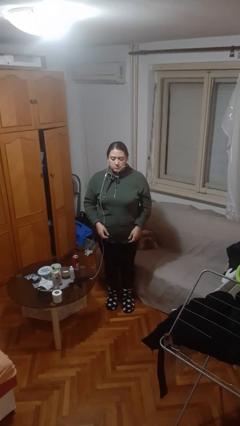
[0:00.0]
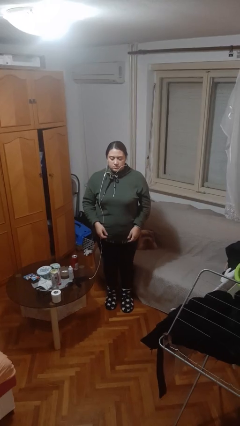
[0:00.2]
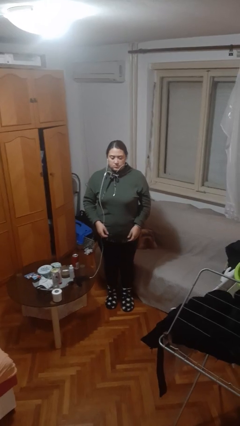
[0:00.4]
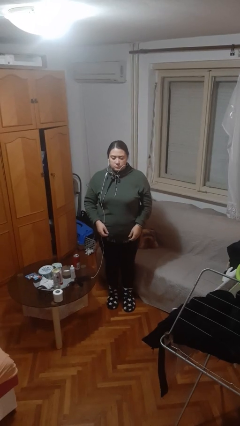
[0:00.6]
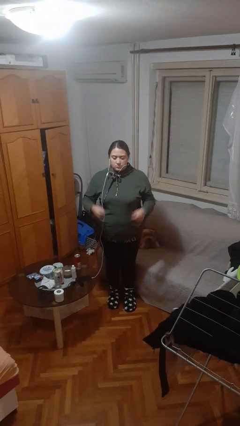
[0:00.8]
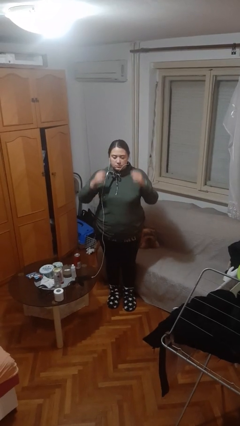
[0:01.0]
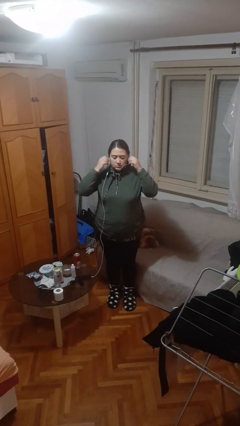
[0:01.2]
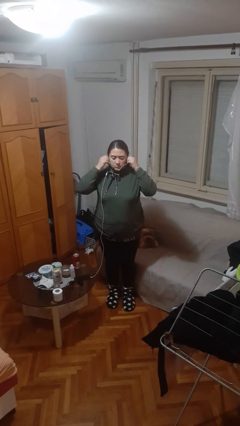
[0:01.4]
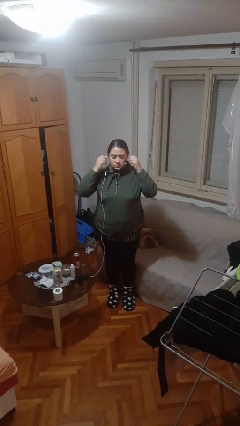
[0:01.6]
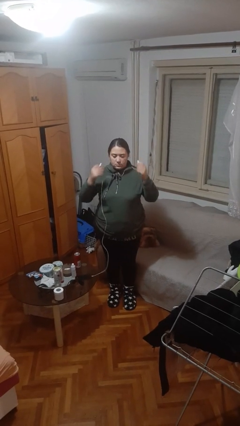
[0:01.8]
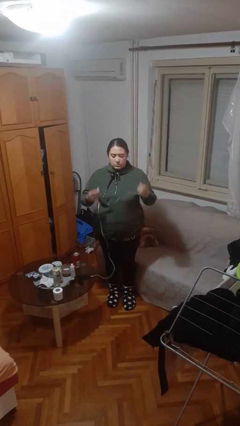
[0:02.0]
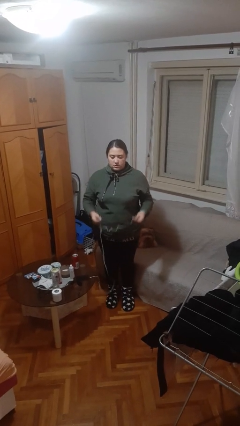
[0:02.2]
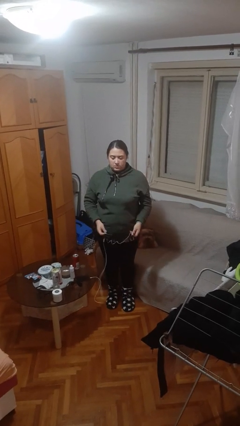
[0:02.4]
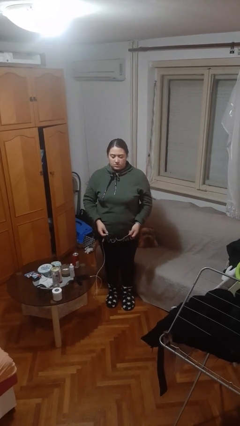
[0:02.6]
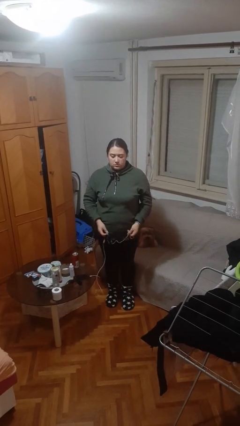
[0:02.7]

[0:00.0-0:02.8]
person takes off headphones

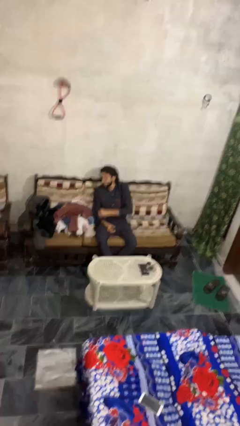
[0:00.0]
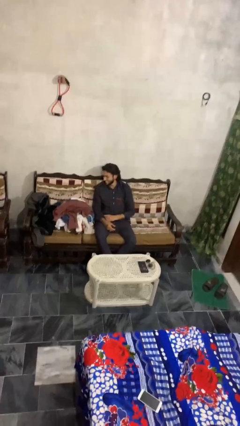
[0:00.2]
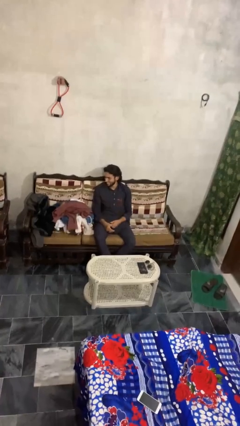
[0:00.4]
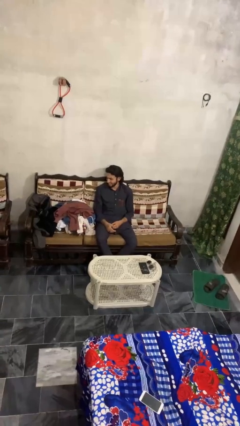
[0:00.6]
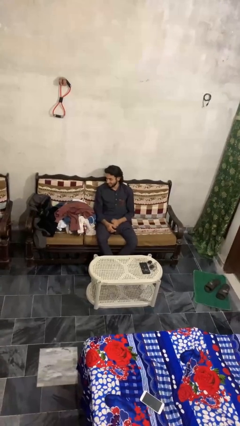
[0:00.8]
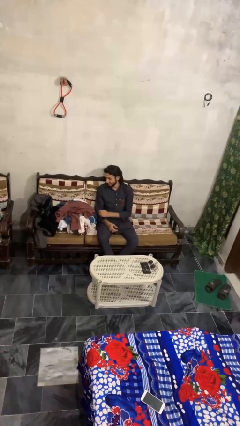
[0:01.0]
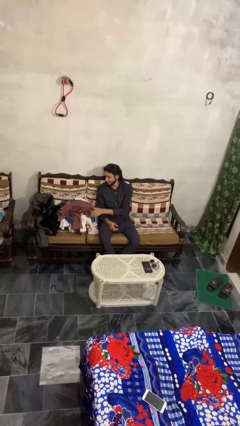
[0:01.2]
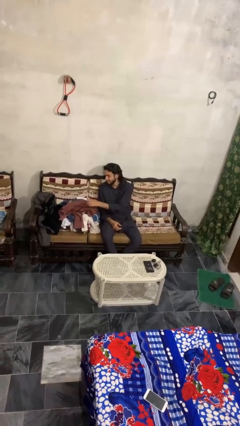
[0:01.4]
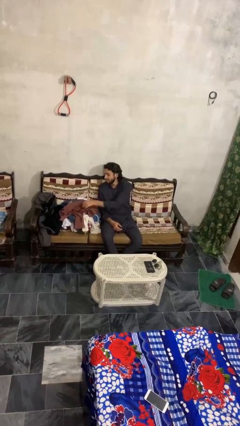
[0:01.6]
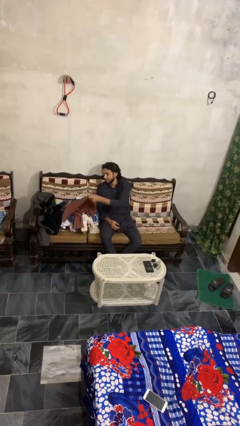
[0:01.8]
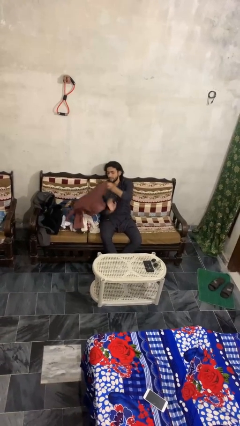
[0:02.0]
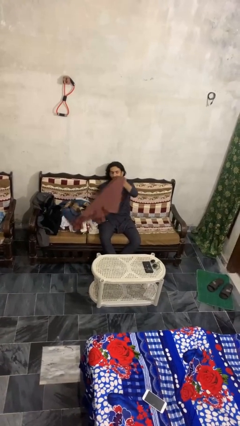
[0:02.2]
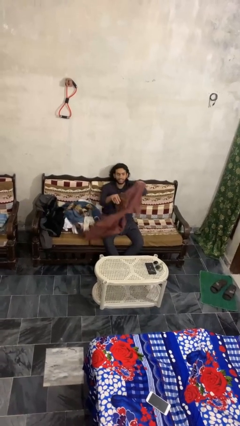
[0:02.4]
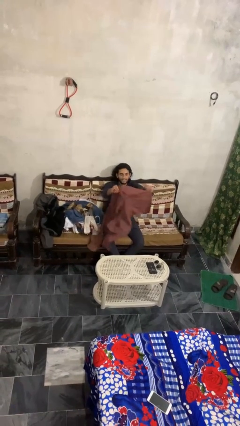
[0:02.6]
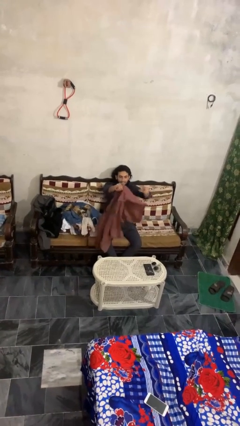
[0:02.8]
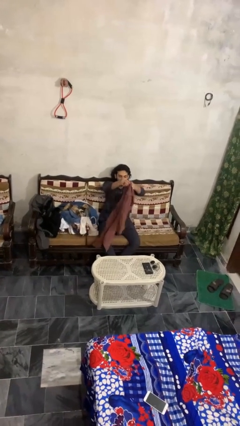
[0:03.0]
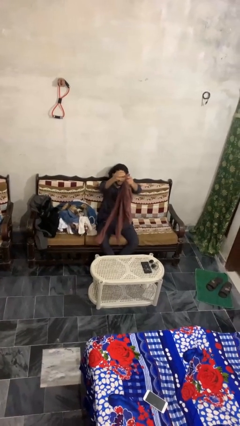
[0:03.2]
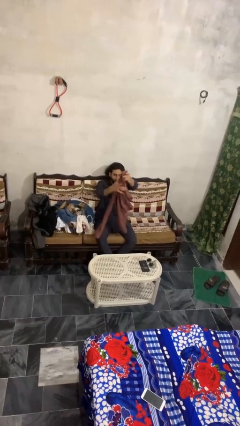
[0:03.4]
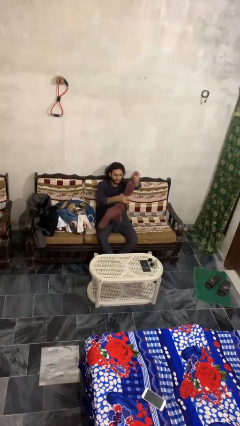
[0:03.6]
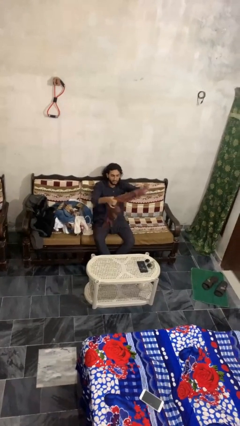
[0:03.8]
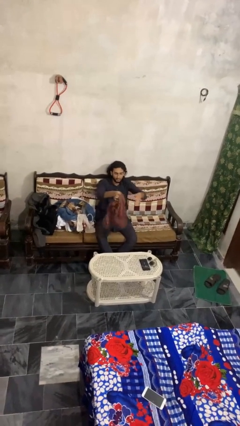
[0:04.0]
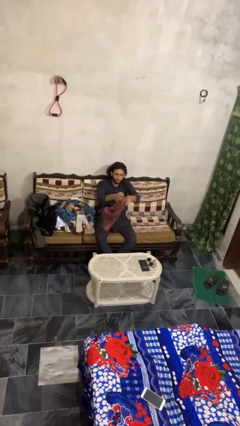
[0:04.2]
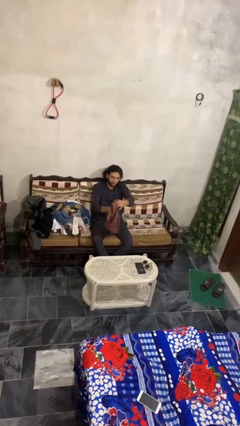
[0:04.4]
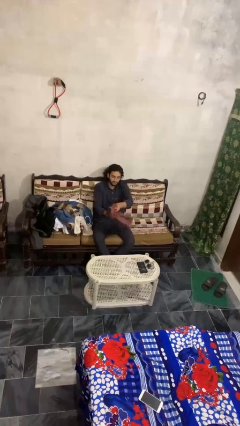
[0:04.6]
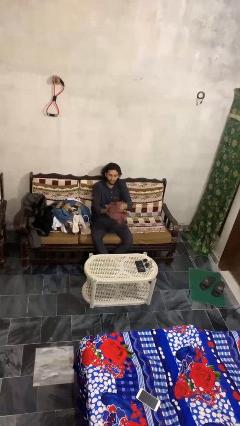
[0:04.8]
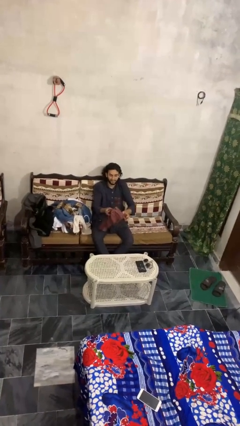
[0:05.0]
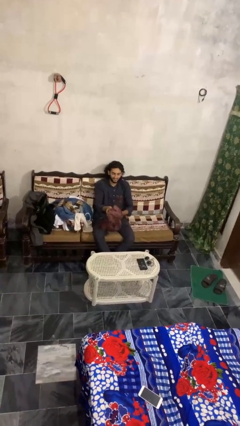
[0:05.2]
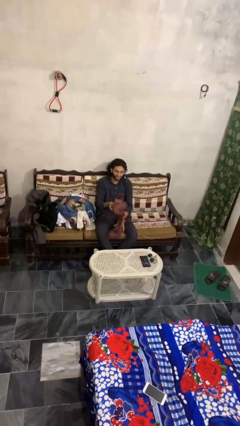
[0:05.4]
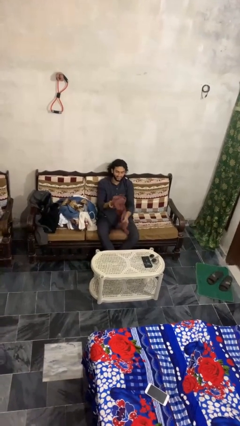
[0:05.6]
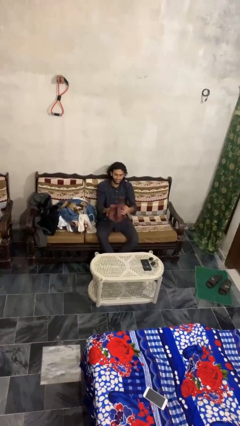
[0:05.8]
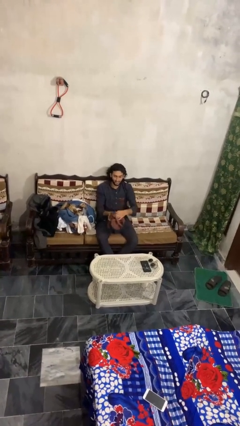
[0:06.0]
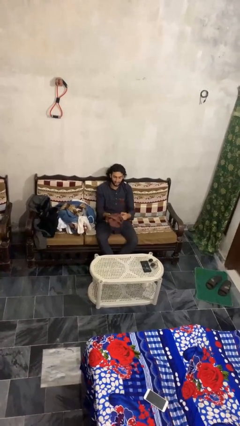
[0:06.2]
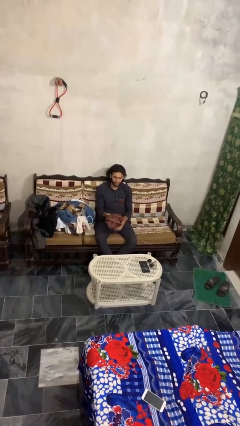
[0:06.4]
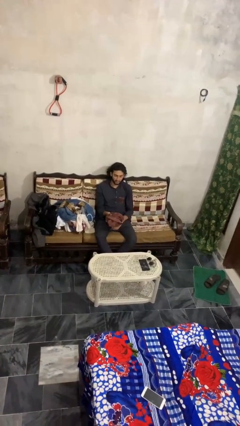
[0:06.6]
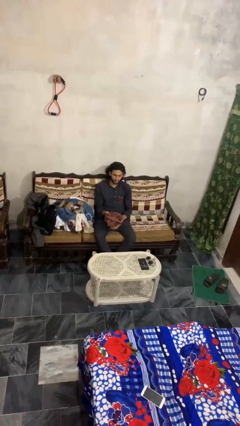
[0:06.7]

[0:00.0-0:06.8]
person folds shirt

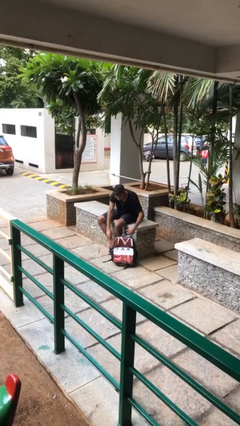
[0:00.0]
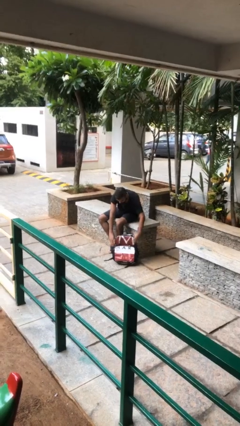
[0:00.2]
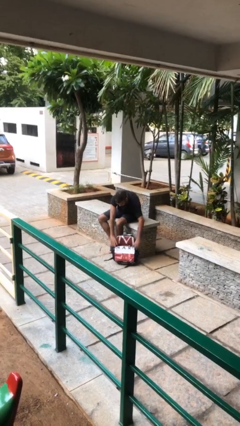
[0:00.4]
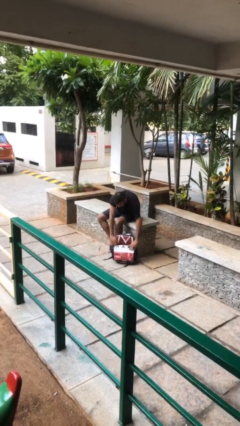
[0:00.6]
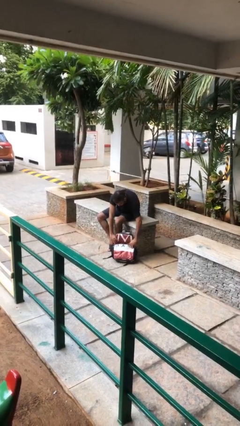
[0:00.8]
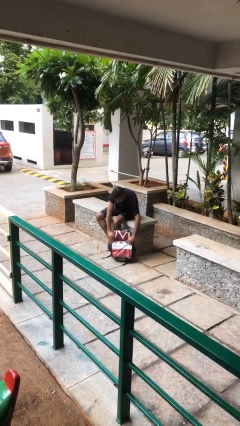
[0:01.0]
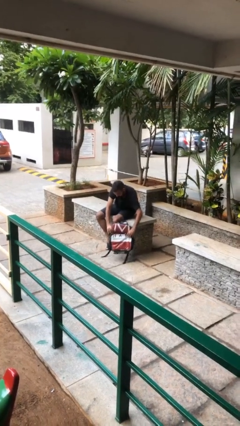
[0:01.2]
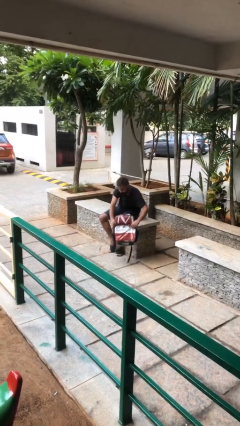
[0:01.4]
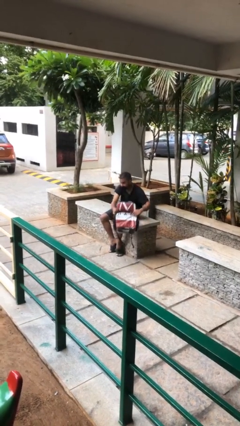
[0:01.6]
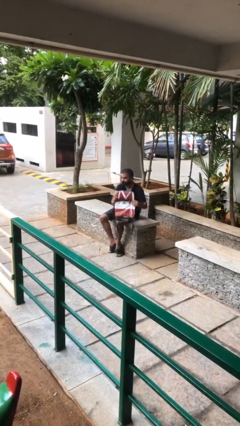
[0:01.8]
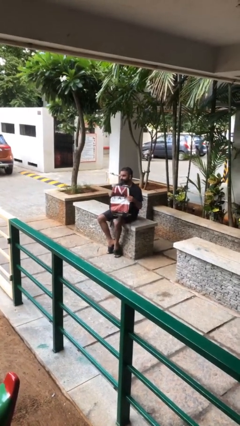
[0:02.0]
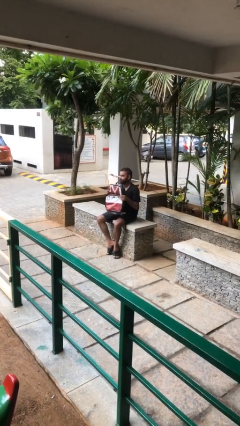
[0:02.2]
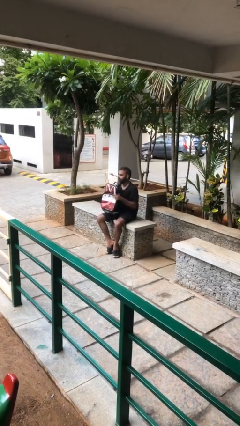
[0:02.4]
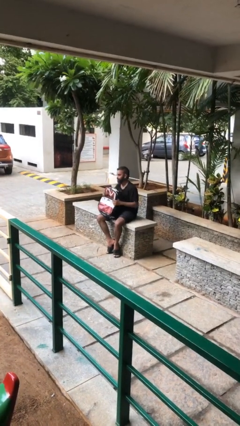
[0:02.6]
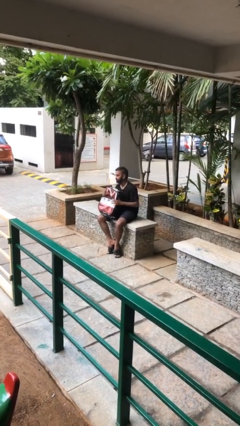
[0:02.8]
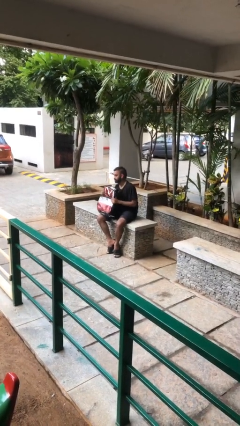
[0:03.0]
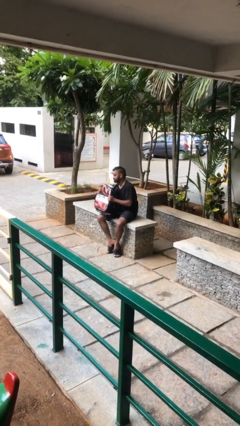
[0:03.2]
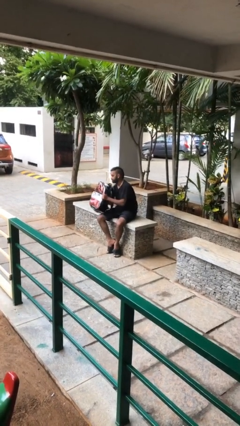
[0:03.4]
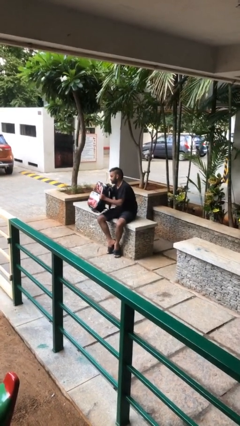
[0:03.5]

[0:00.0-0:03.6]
person picks up object from floor

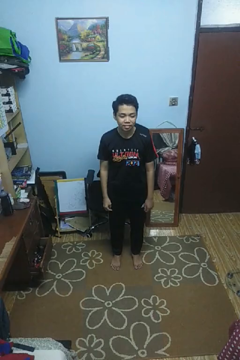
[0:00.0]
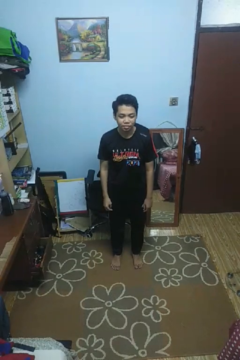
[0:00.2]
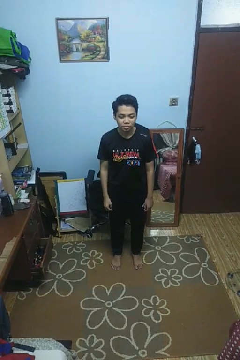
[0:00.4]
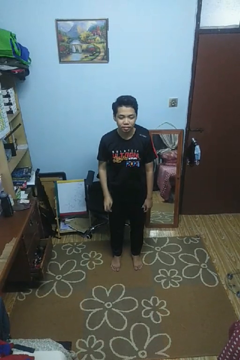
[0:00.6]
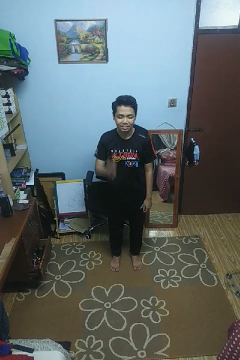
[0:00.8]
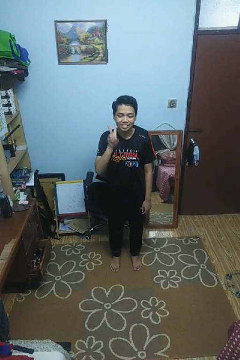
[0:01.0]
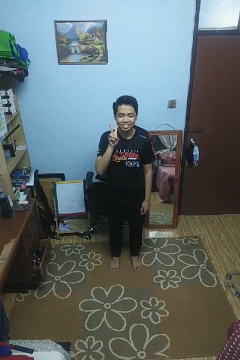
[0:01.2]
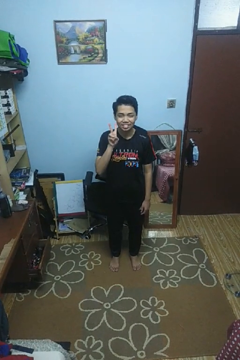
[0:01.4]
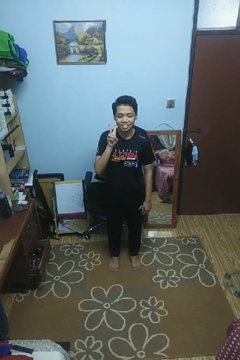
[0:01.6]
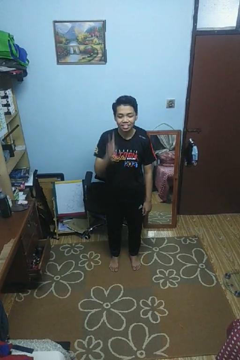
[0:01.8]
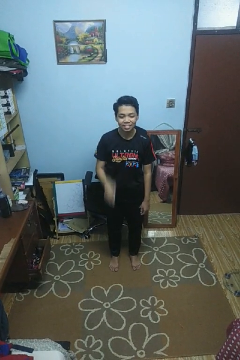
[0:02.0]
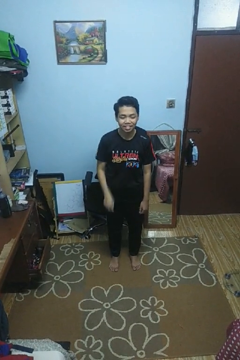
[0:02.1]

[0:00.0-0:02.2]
person gestures peace

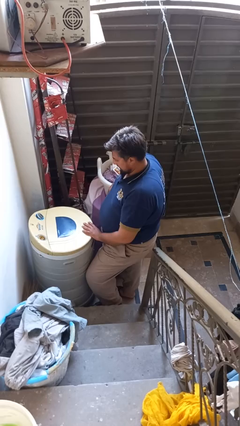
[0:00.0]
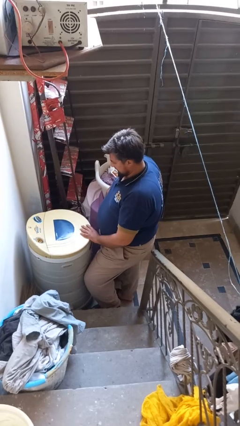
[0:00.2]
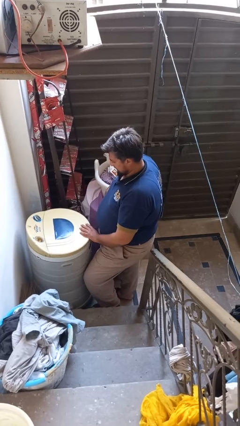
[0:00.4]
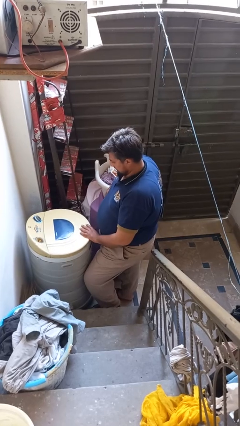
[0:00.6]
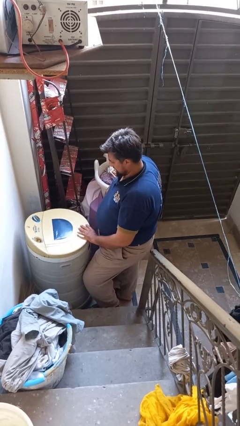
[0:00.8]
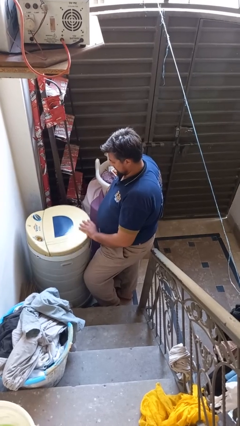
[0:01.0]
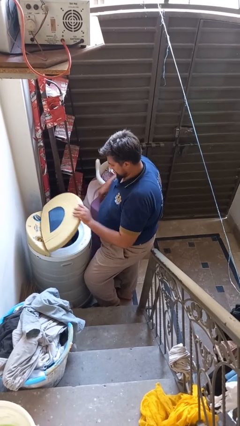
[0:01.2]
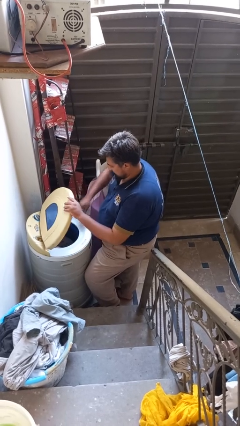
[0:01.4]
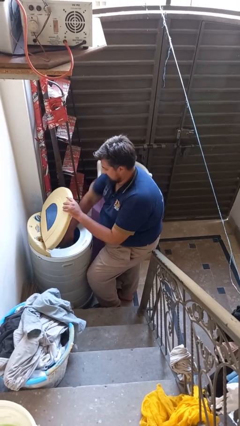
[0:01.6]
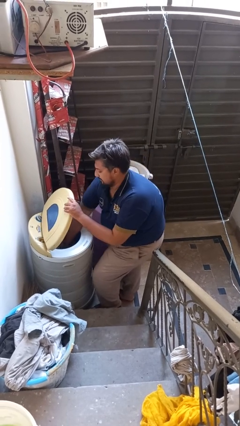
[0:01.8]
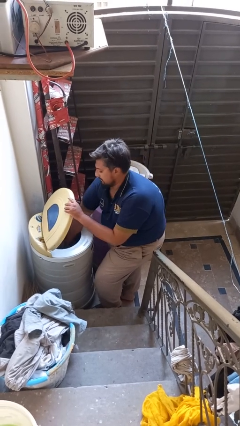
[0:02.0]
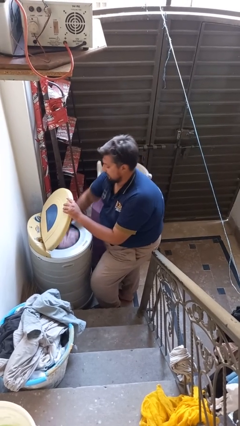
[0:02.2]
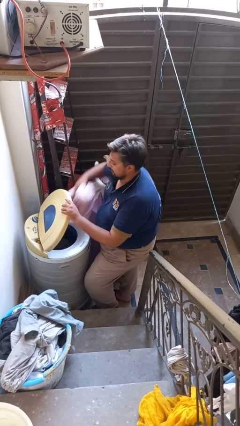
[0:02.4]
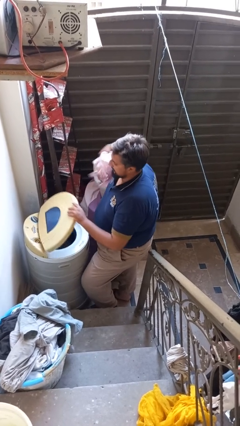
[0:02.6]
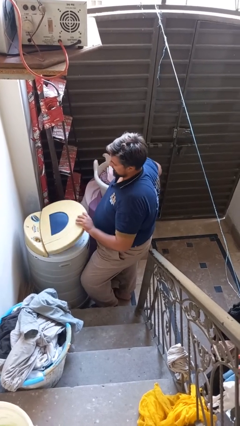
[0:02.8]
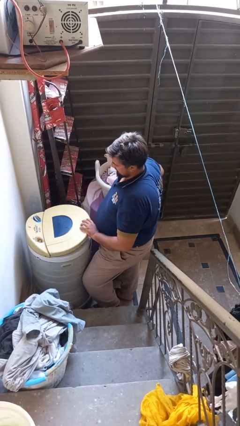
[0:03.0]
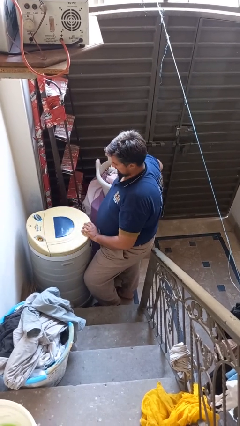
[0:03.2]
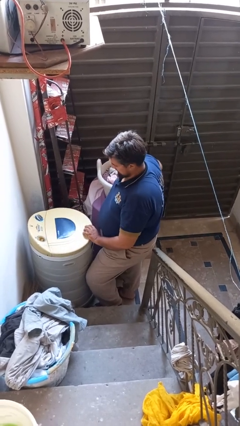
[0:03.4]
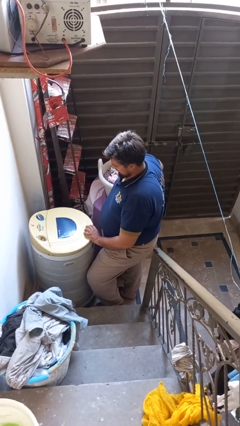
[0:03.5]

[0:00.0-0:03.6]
person unloads dryer
